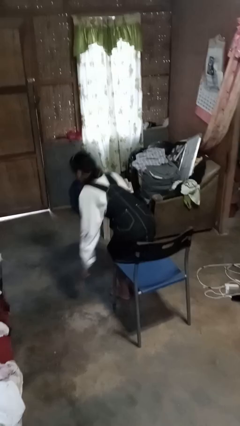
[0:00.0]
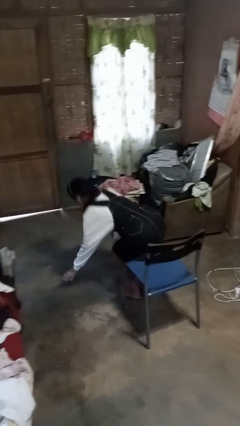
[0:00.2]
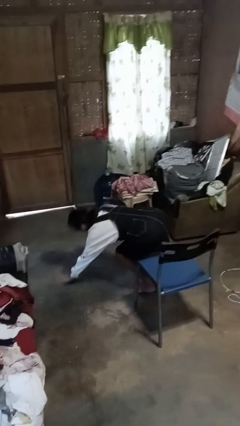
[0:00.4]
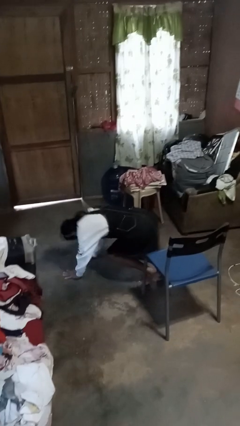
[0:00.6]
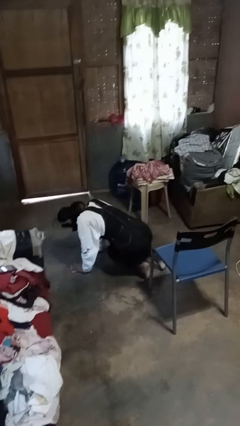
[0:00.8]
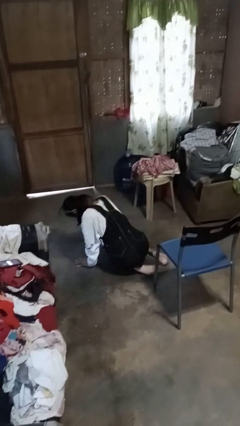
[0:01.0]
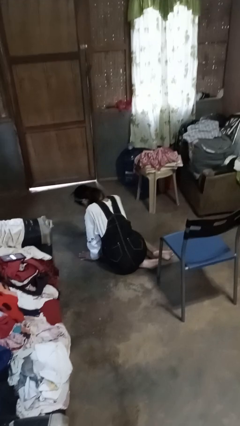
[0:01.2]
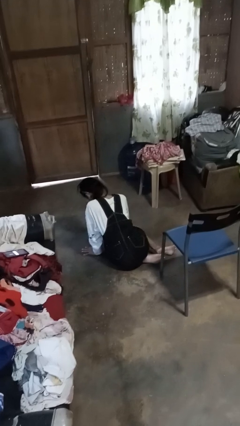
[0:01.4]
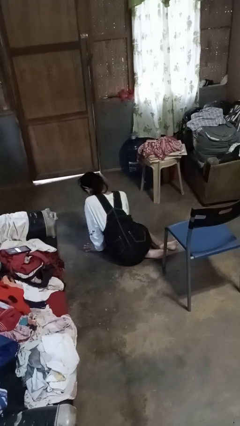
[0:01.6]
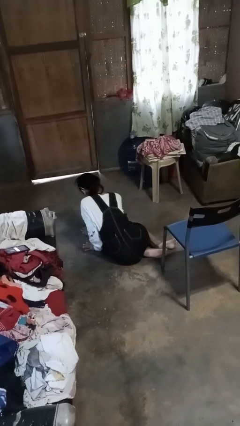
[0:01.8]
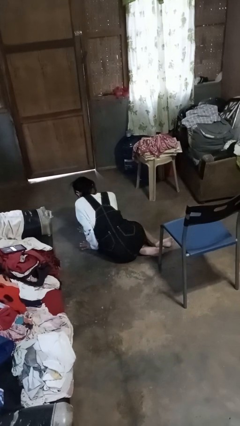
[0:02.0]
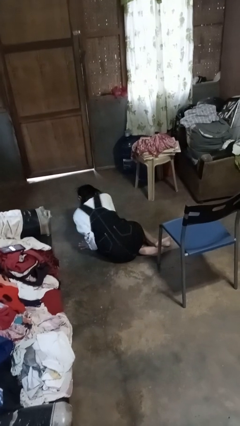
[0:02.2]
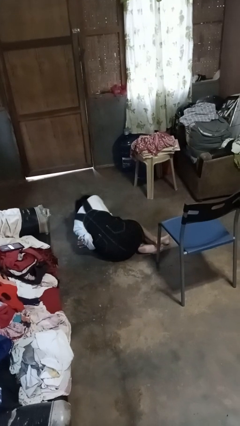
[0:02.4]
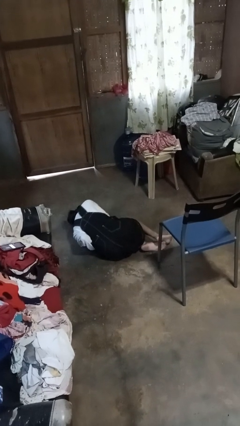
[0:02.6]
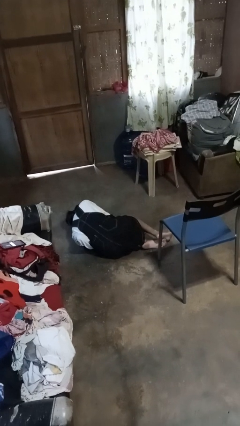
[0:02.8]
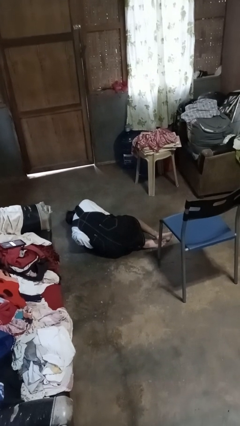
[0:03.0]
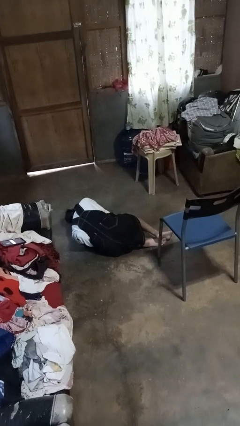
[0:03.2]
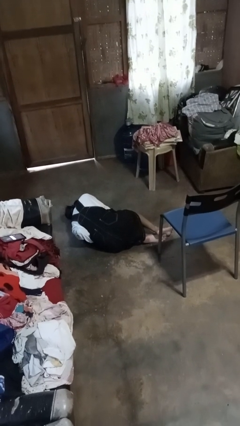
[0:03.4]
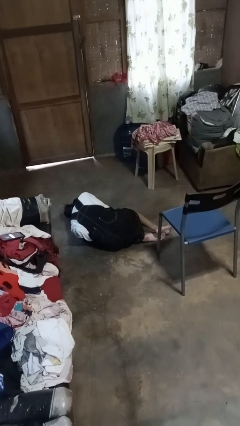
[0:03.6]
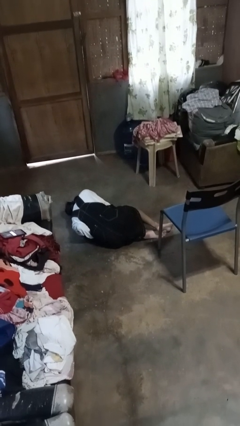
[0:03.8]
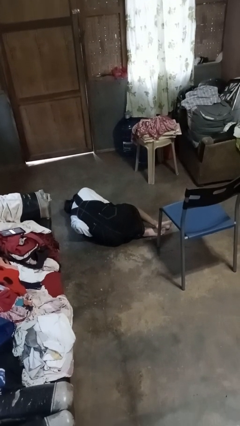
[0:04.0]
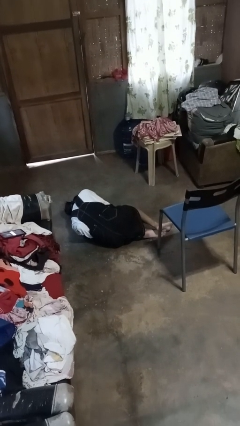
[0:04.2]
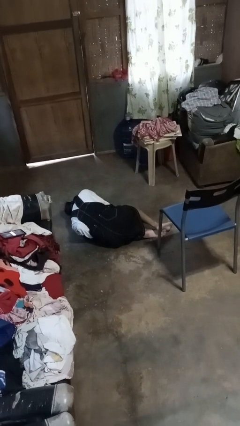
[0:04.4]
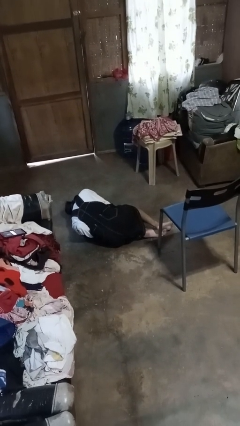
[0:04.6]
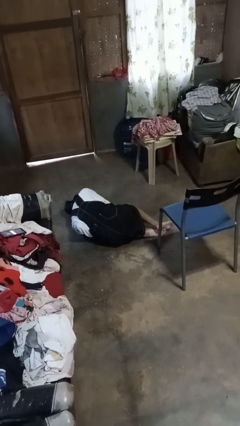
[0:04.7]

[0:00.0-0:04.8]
person falls from chair

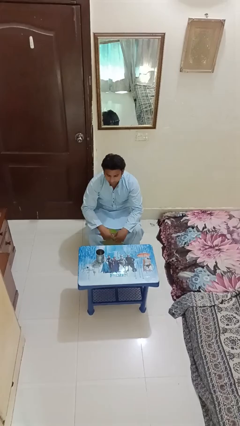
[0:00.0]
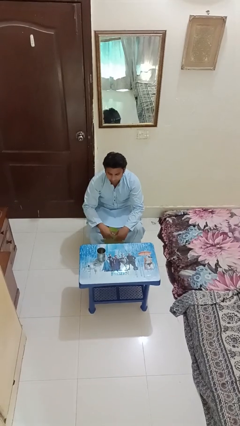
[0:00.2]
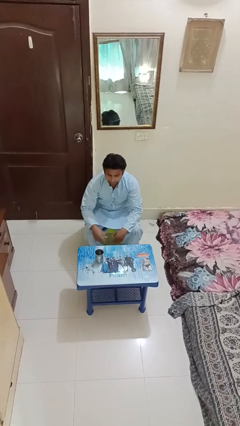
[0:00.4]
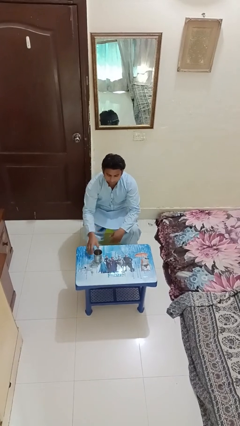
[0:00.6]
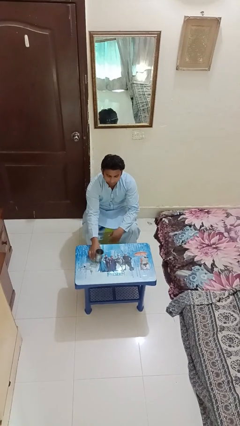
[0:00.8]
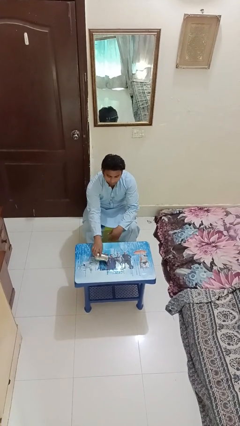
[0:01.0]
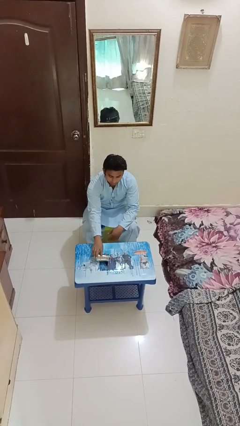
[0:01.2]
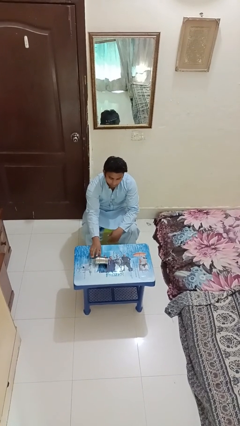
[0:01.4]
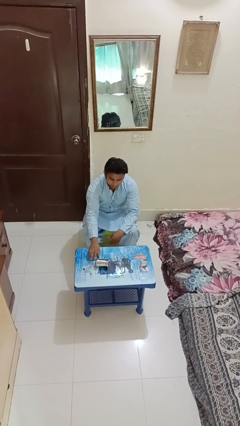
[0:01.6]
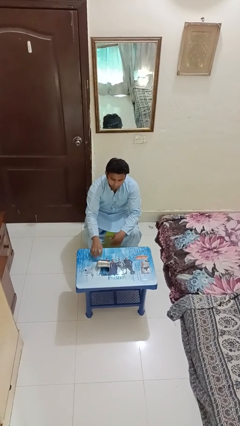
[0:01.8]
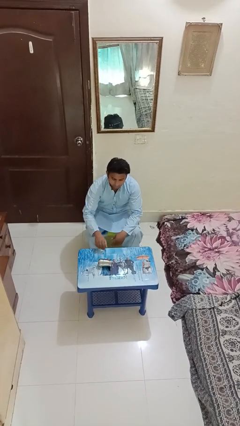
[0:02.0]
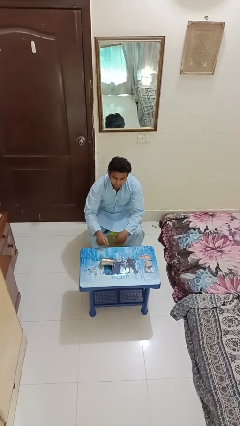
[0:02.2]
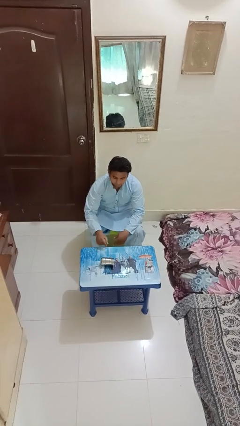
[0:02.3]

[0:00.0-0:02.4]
person knocks over glass

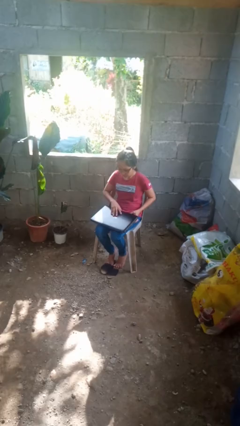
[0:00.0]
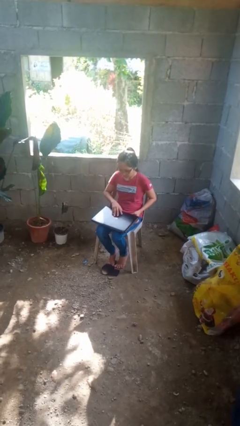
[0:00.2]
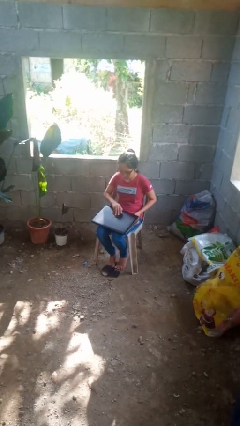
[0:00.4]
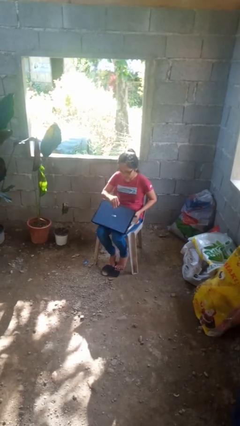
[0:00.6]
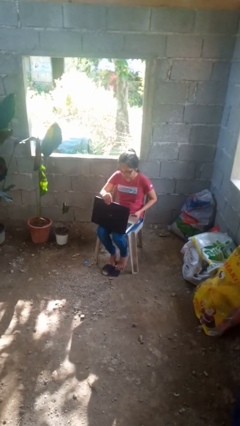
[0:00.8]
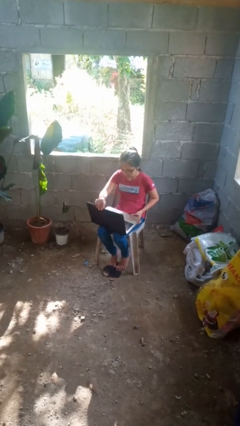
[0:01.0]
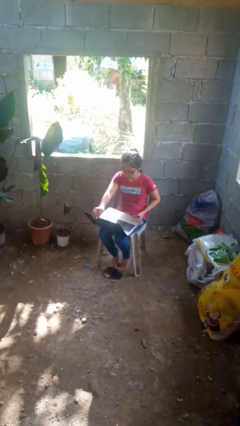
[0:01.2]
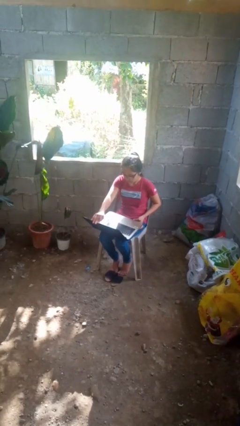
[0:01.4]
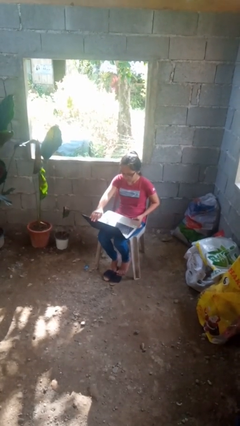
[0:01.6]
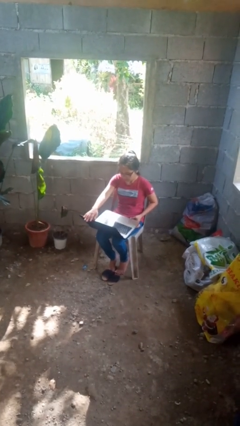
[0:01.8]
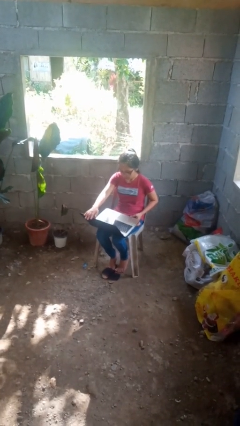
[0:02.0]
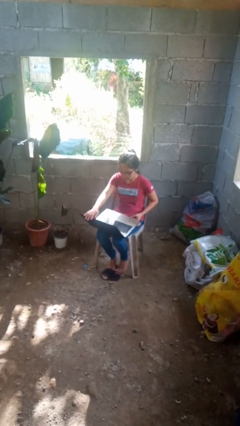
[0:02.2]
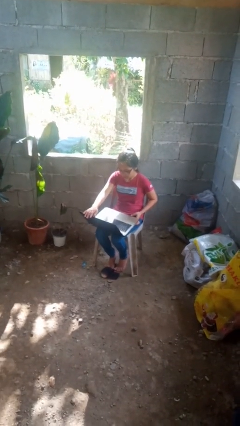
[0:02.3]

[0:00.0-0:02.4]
person opens laptop

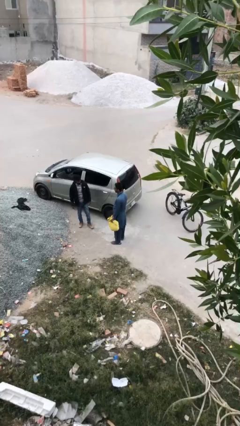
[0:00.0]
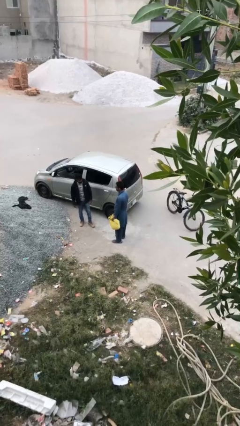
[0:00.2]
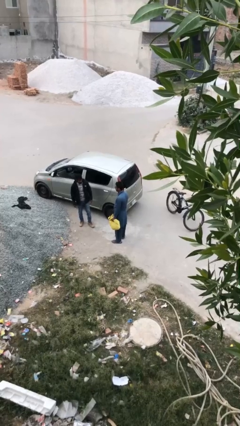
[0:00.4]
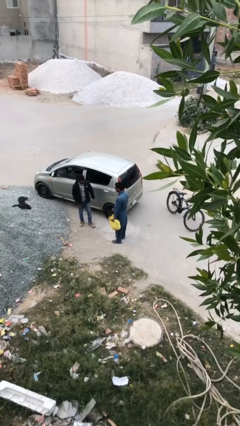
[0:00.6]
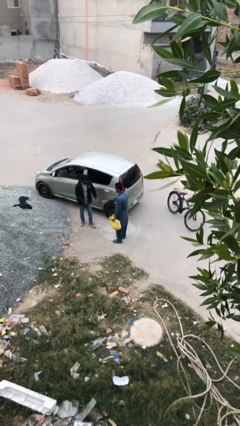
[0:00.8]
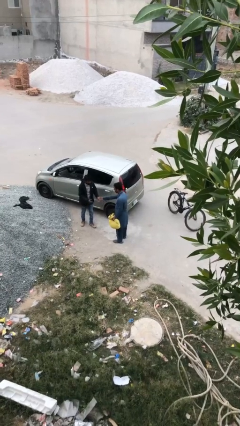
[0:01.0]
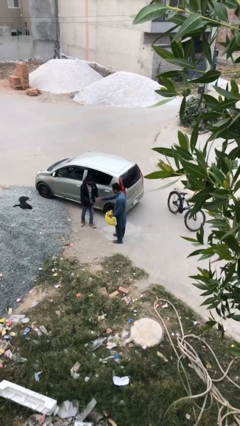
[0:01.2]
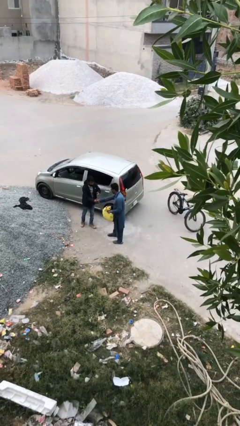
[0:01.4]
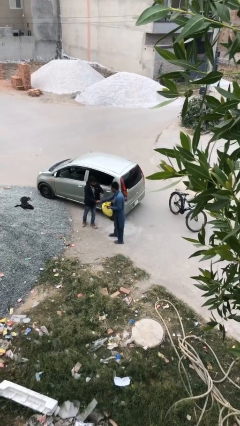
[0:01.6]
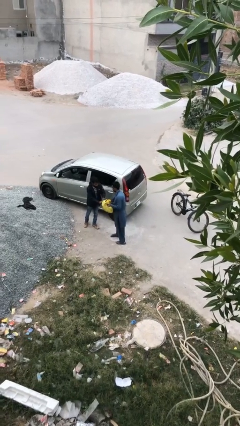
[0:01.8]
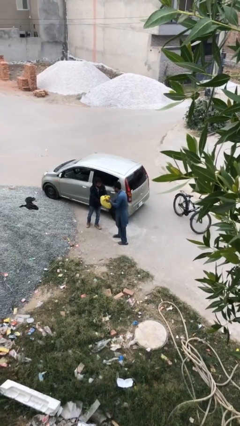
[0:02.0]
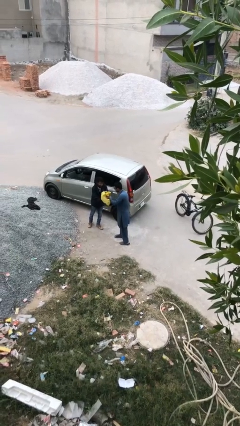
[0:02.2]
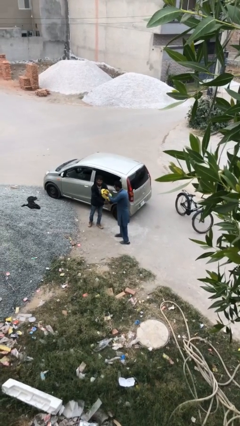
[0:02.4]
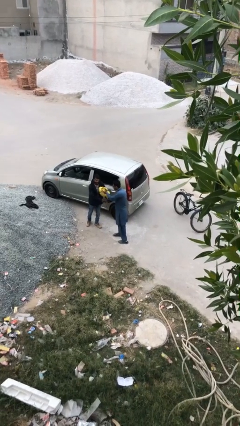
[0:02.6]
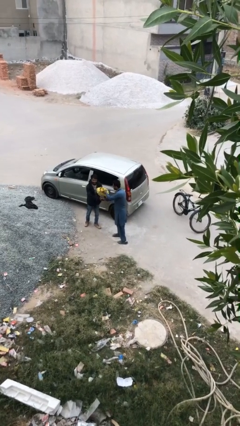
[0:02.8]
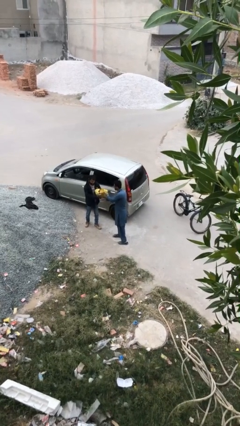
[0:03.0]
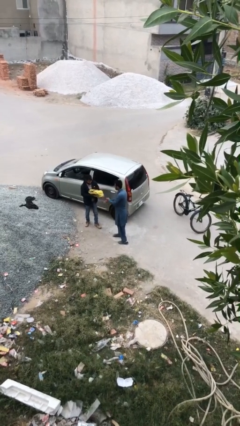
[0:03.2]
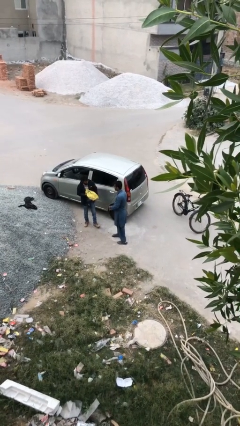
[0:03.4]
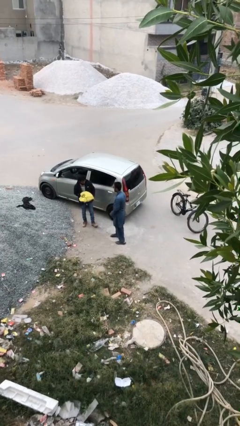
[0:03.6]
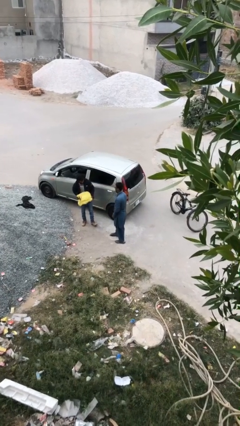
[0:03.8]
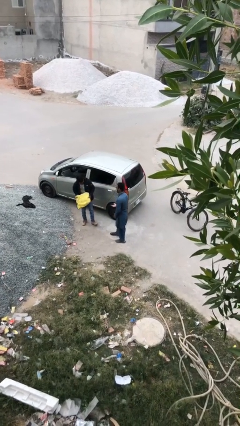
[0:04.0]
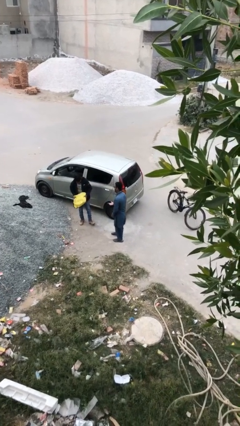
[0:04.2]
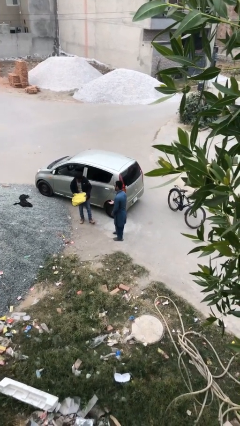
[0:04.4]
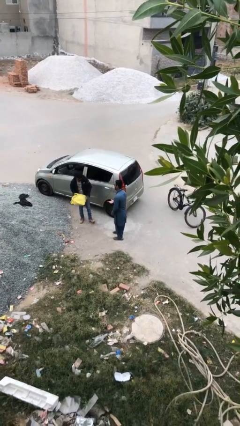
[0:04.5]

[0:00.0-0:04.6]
person transfers object to person

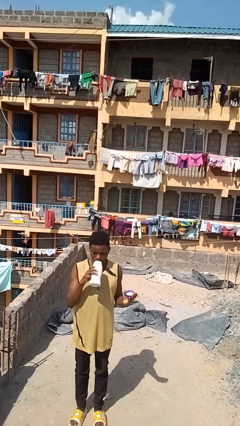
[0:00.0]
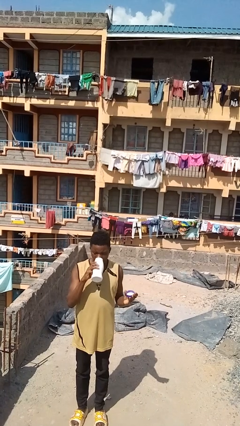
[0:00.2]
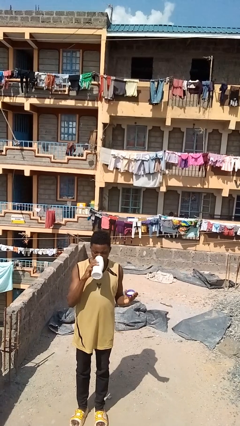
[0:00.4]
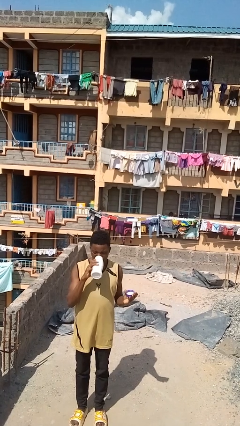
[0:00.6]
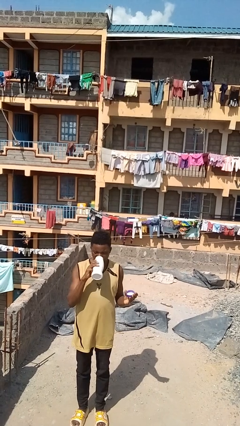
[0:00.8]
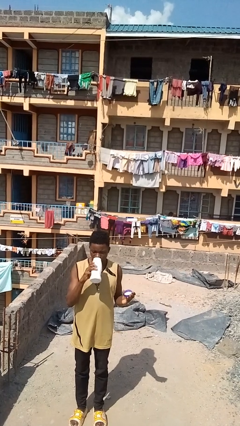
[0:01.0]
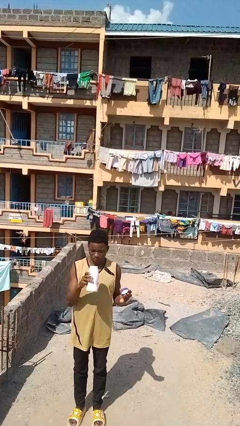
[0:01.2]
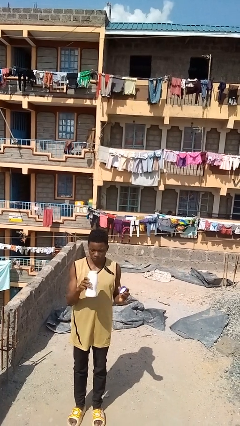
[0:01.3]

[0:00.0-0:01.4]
person drinks from beverage can

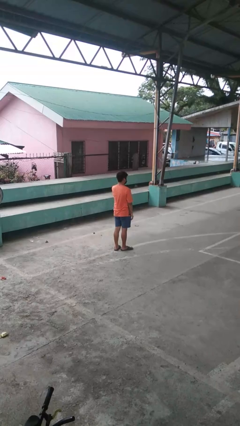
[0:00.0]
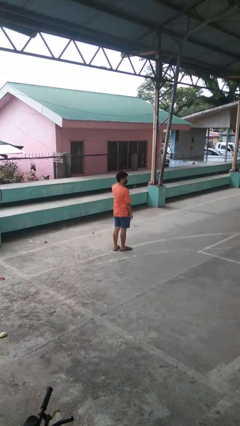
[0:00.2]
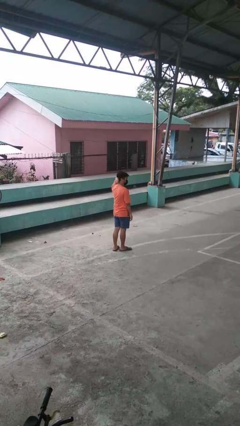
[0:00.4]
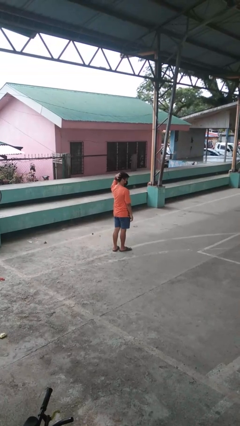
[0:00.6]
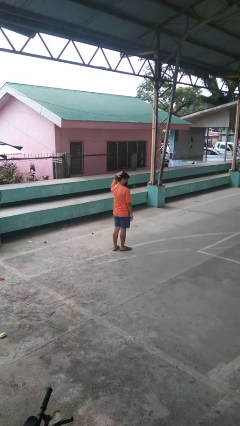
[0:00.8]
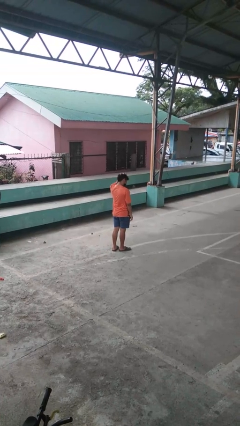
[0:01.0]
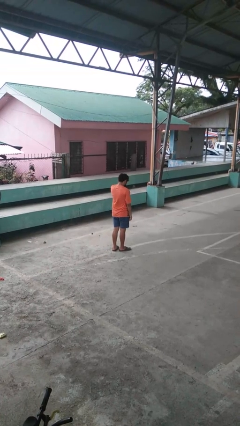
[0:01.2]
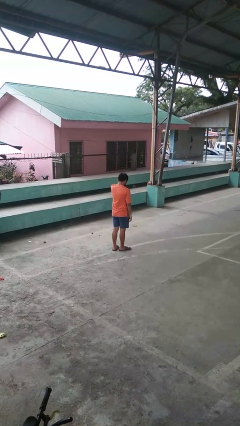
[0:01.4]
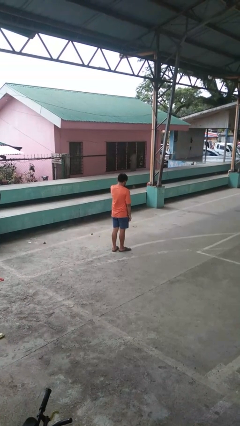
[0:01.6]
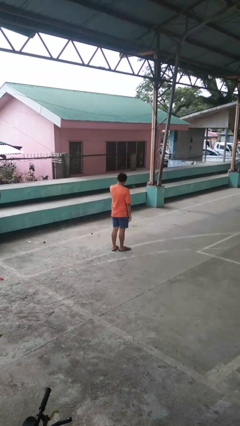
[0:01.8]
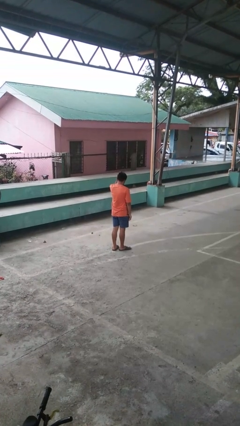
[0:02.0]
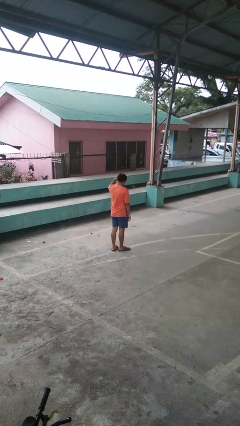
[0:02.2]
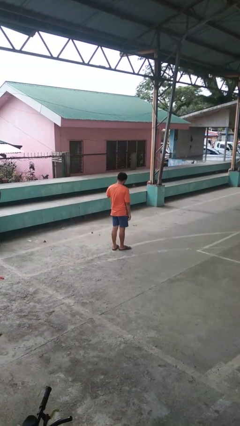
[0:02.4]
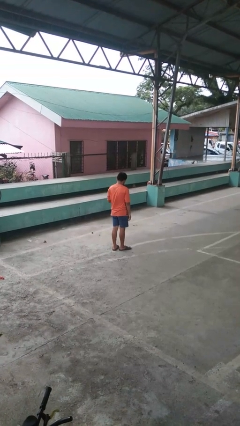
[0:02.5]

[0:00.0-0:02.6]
person scratches face
